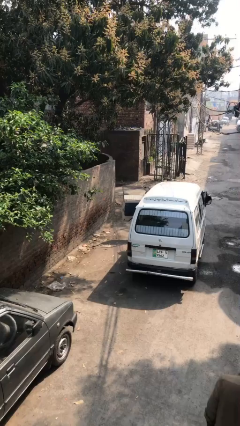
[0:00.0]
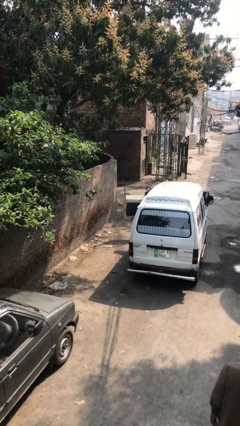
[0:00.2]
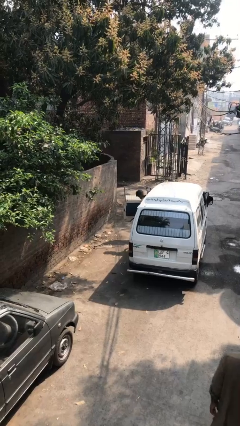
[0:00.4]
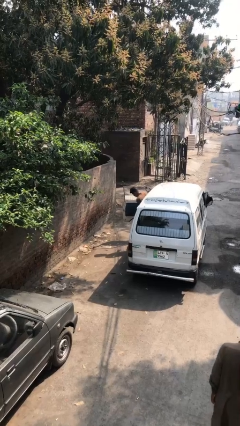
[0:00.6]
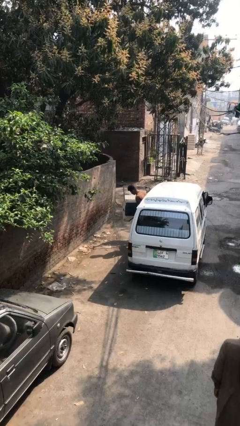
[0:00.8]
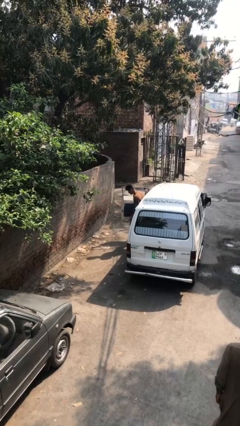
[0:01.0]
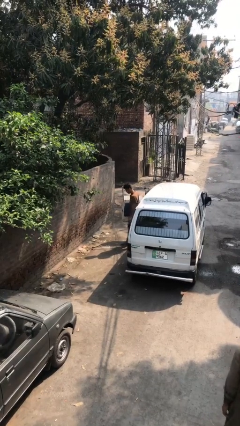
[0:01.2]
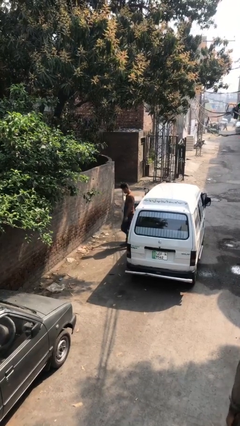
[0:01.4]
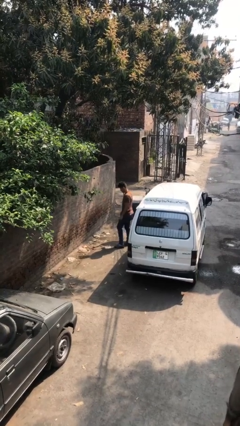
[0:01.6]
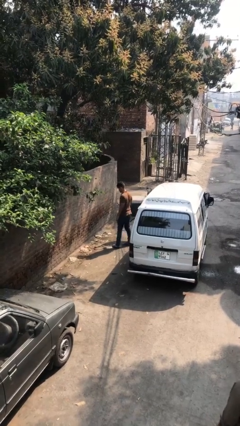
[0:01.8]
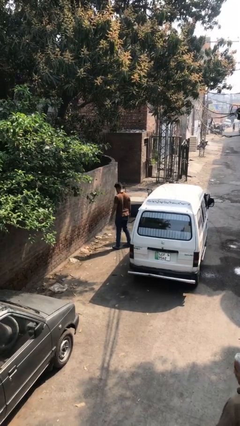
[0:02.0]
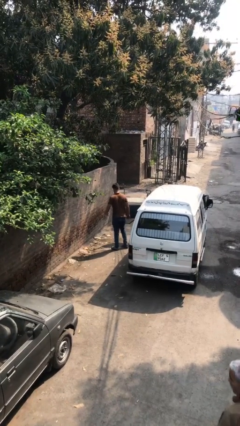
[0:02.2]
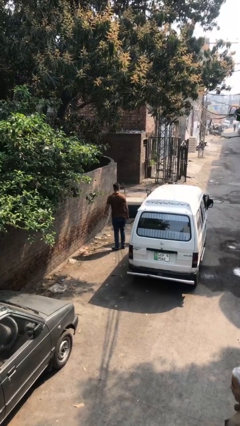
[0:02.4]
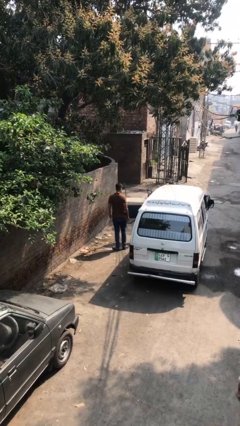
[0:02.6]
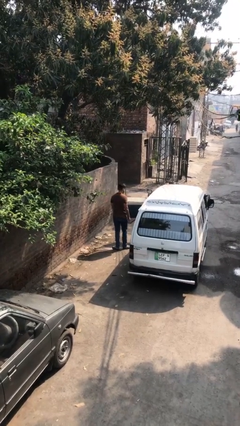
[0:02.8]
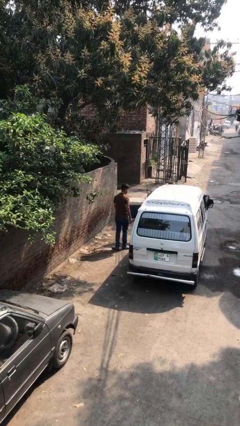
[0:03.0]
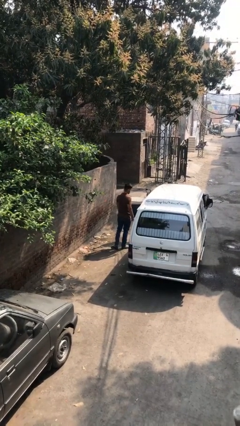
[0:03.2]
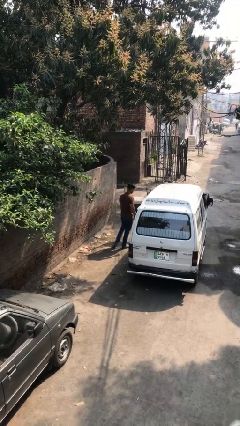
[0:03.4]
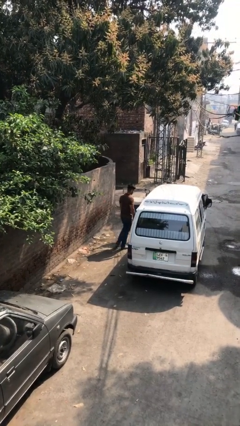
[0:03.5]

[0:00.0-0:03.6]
person exits car

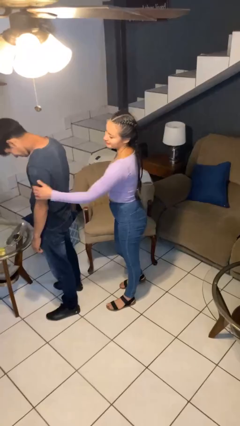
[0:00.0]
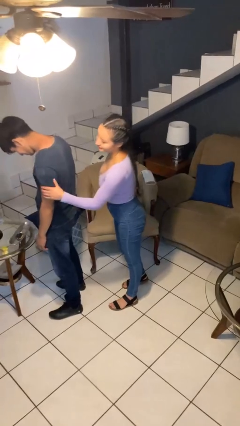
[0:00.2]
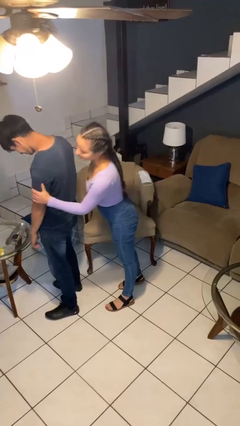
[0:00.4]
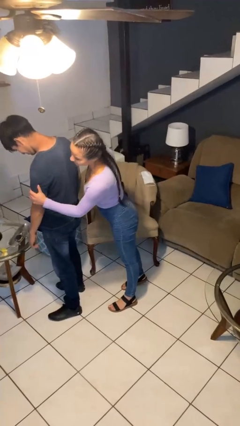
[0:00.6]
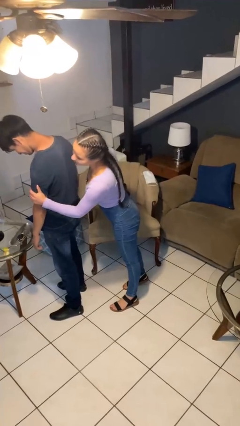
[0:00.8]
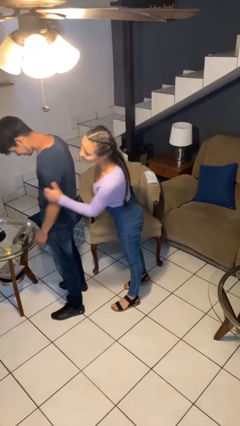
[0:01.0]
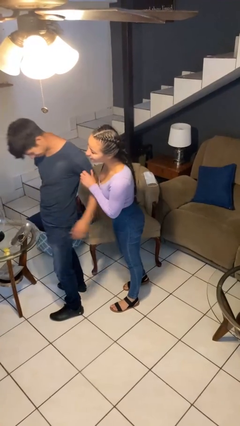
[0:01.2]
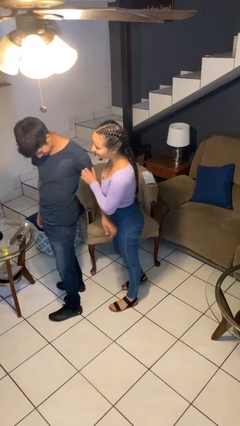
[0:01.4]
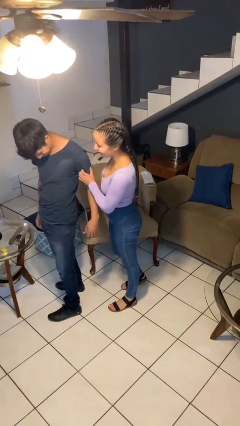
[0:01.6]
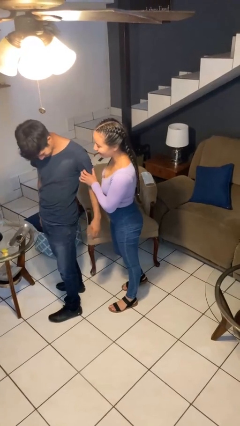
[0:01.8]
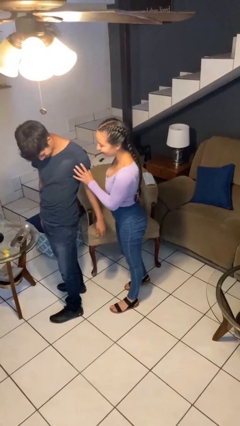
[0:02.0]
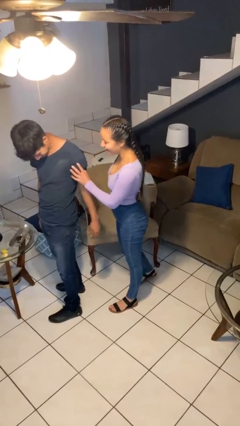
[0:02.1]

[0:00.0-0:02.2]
person grabs person by bicep

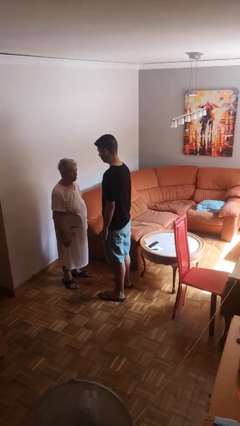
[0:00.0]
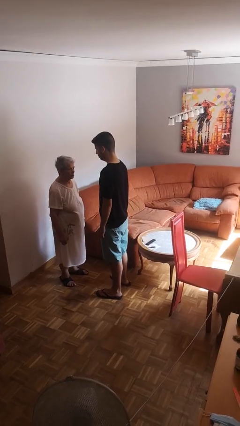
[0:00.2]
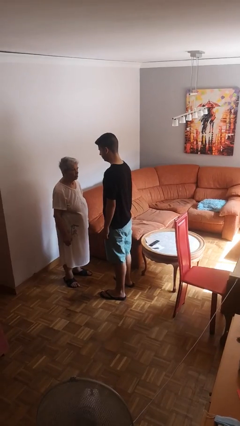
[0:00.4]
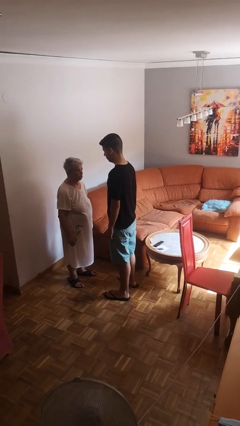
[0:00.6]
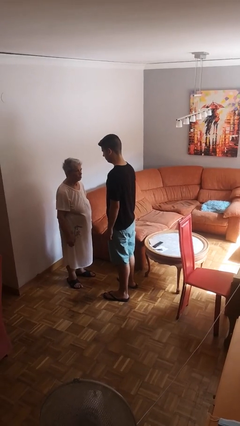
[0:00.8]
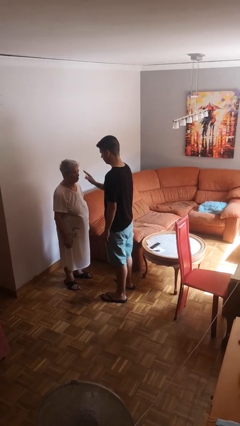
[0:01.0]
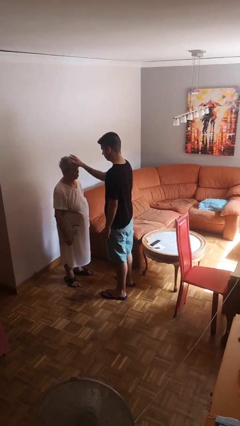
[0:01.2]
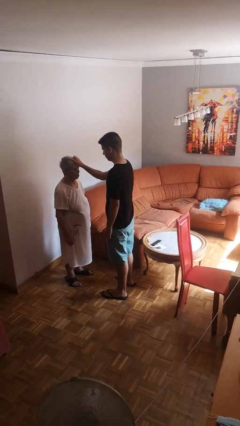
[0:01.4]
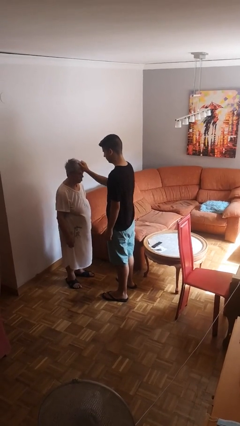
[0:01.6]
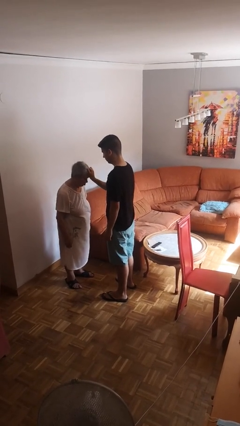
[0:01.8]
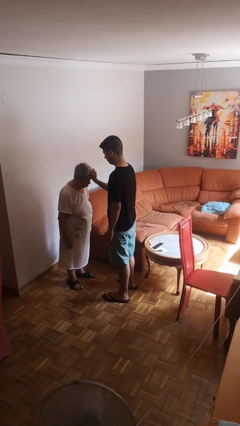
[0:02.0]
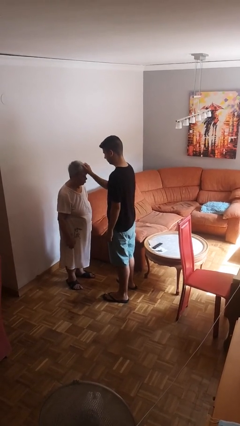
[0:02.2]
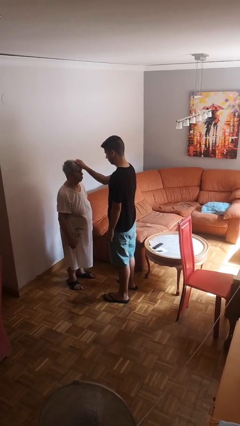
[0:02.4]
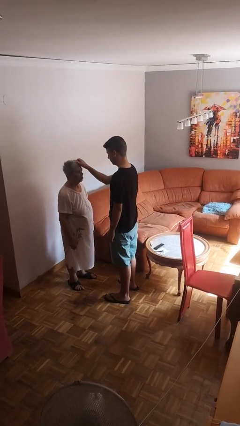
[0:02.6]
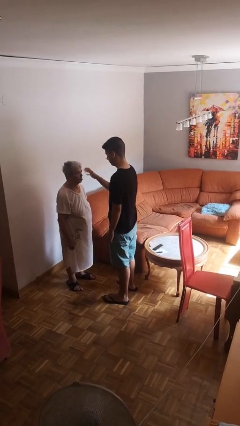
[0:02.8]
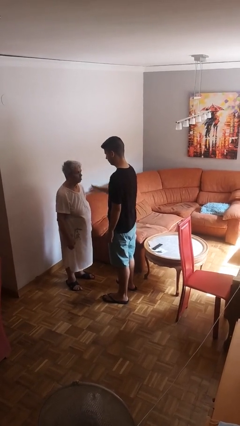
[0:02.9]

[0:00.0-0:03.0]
person grabs person by hair

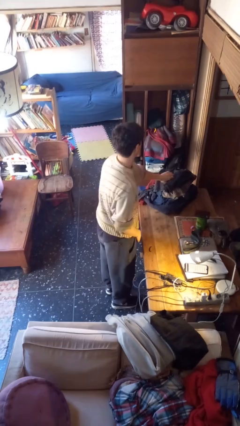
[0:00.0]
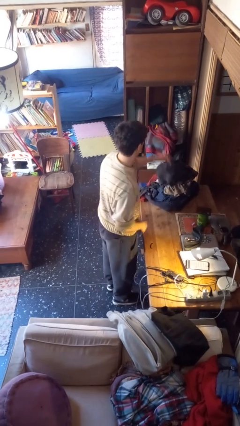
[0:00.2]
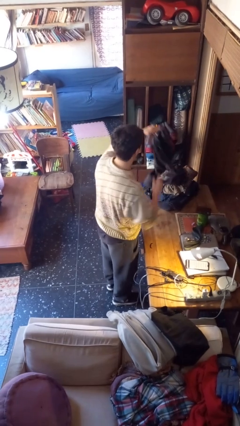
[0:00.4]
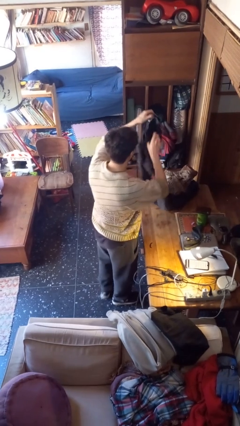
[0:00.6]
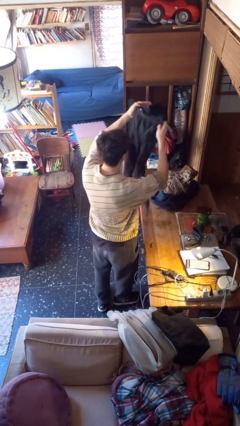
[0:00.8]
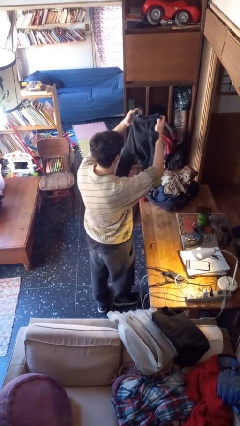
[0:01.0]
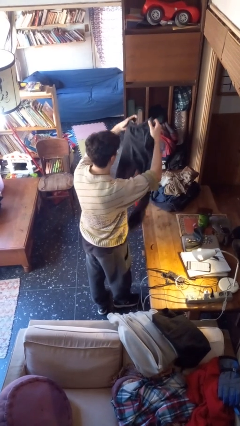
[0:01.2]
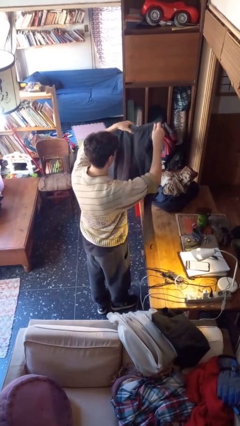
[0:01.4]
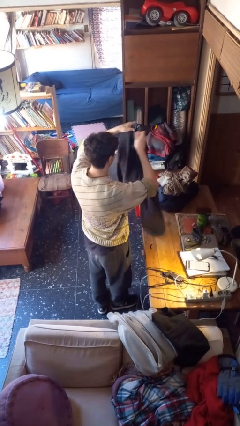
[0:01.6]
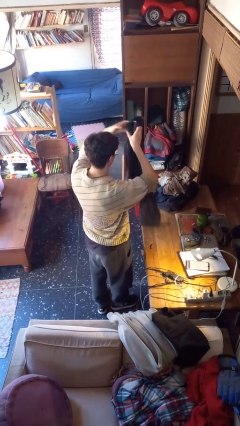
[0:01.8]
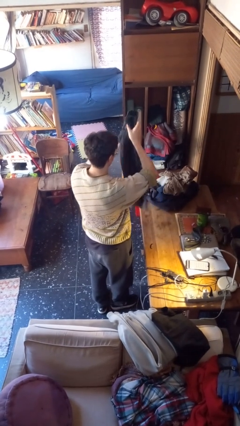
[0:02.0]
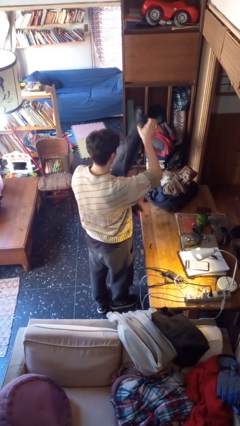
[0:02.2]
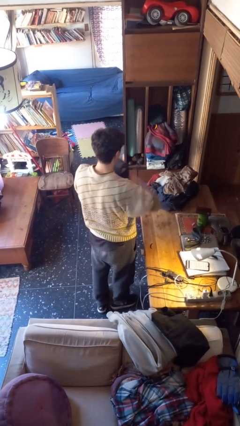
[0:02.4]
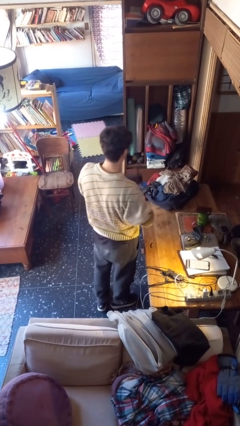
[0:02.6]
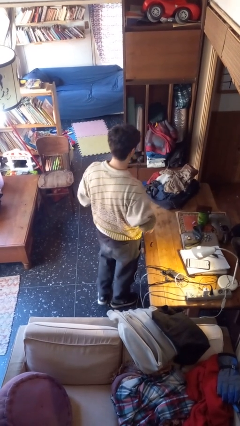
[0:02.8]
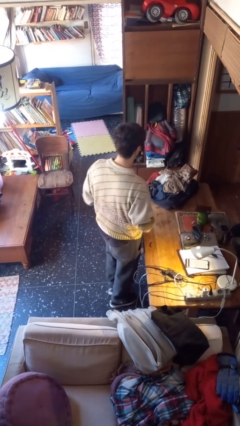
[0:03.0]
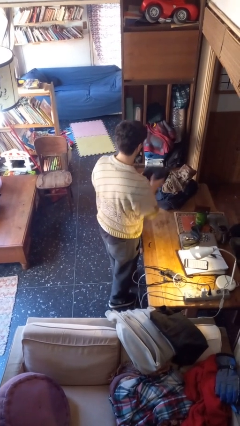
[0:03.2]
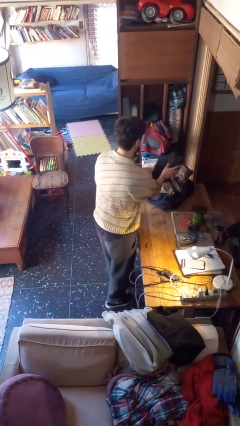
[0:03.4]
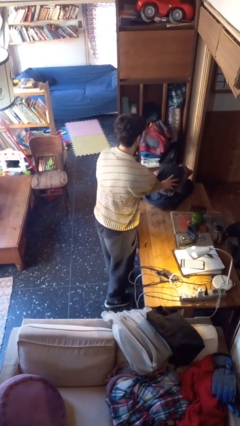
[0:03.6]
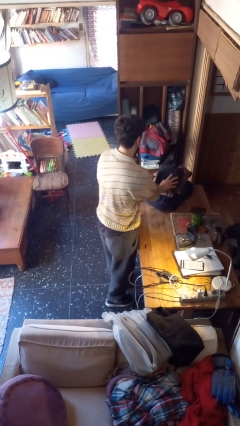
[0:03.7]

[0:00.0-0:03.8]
person folds pants

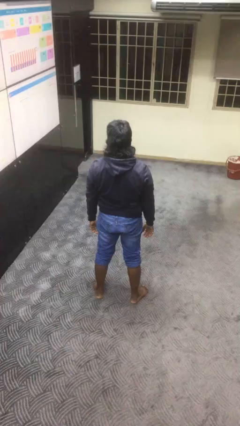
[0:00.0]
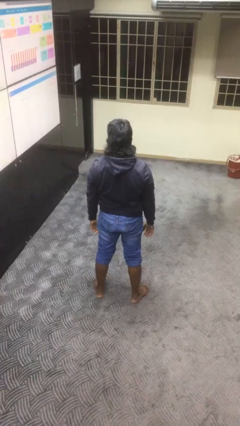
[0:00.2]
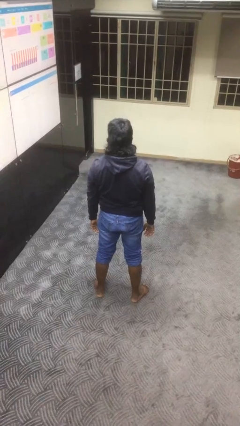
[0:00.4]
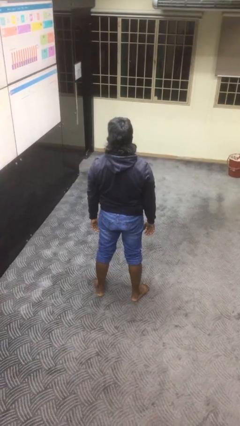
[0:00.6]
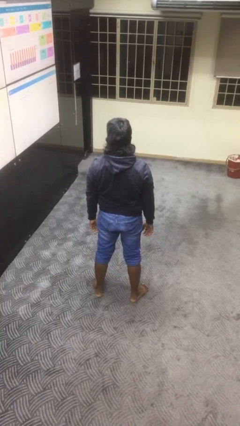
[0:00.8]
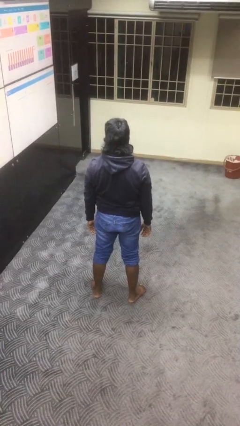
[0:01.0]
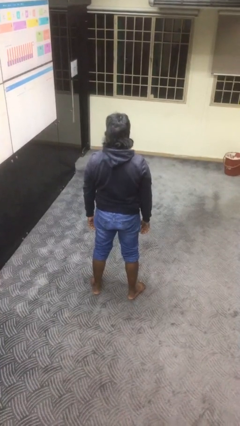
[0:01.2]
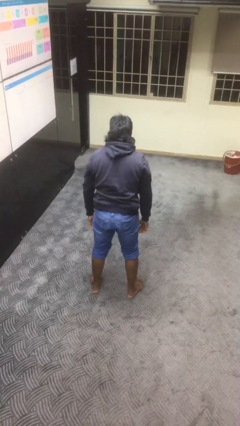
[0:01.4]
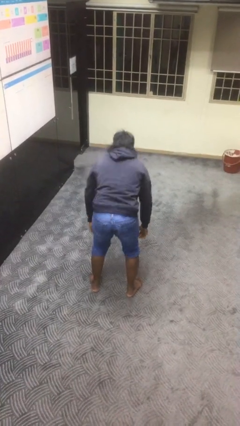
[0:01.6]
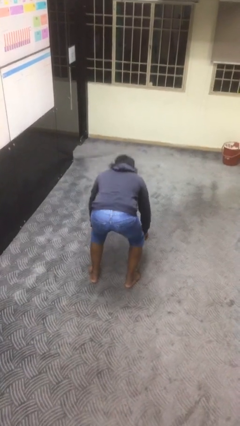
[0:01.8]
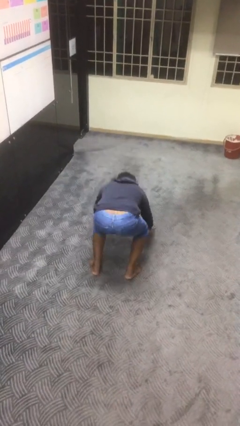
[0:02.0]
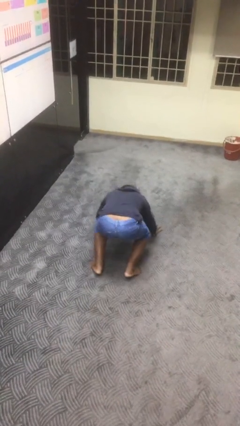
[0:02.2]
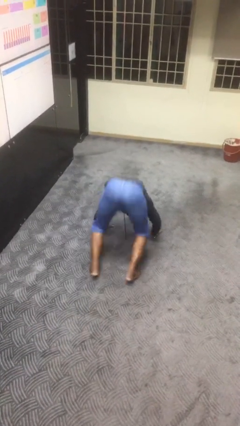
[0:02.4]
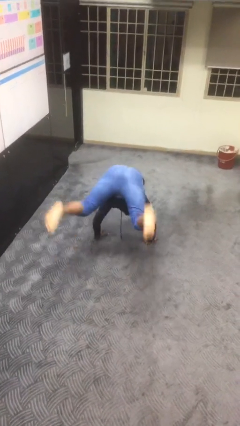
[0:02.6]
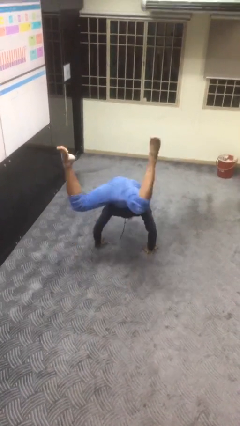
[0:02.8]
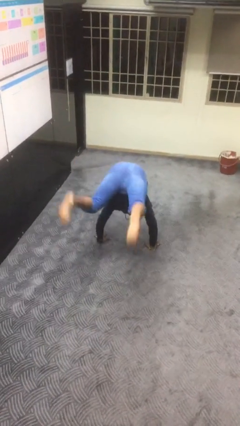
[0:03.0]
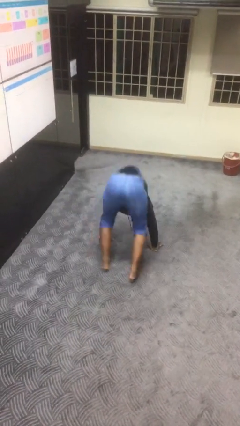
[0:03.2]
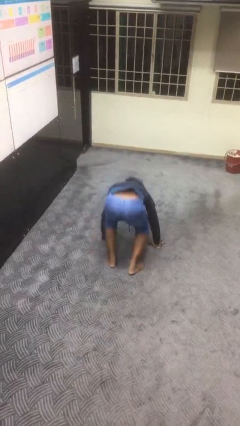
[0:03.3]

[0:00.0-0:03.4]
person handstand

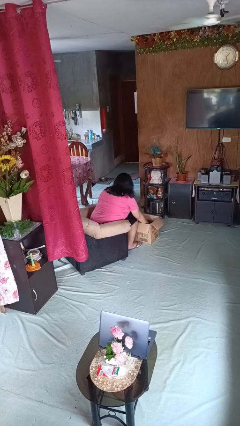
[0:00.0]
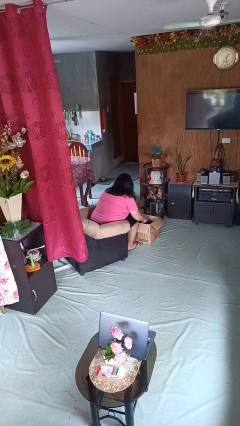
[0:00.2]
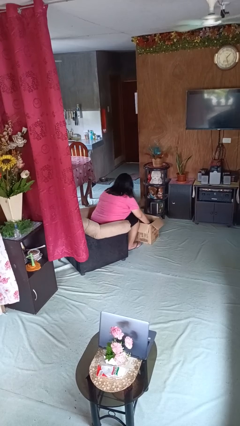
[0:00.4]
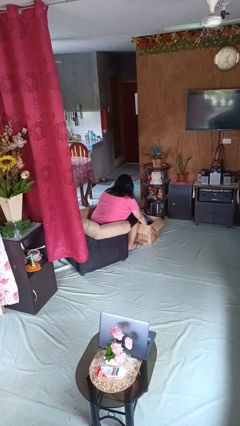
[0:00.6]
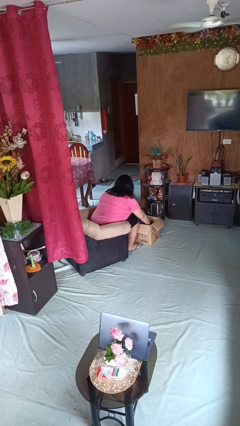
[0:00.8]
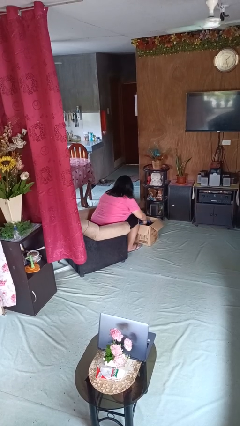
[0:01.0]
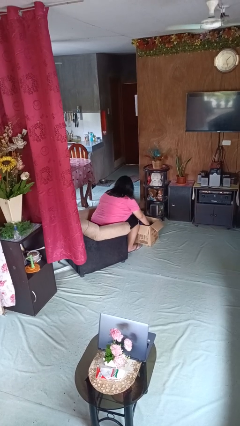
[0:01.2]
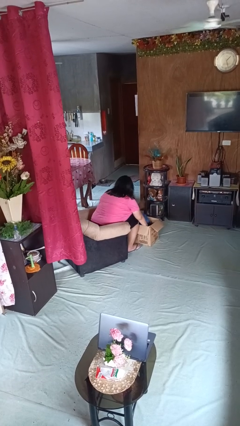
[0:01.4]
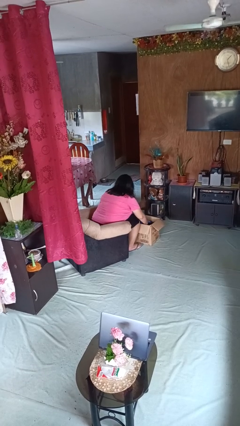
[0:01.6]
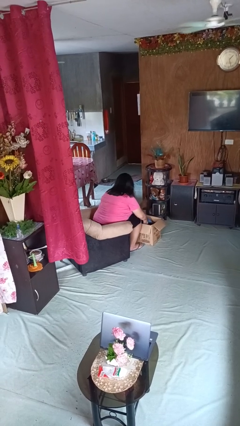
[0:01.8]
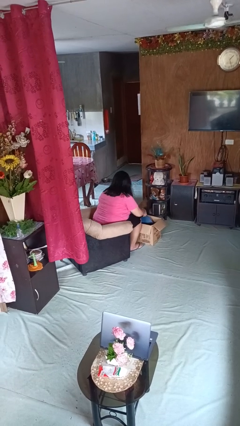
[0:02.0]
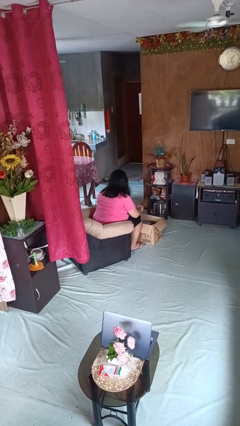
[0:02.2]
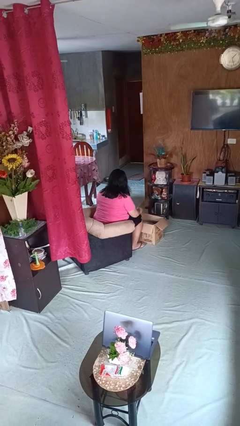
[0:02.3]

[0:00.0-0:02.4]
person searches in box
